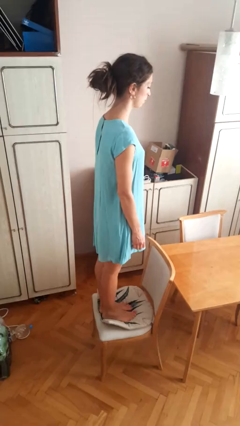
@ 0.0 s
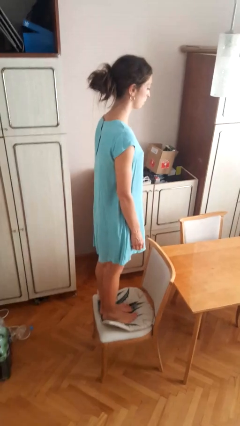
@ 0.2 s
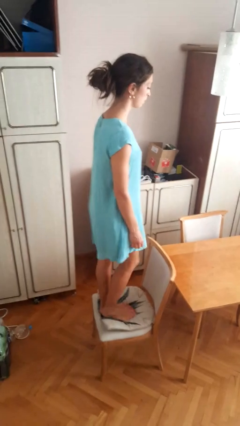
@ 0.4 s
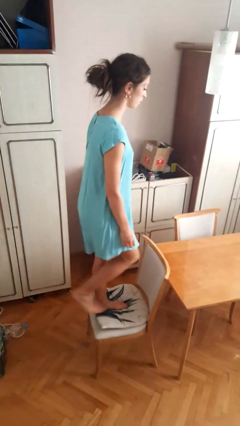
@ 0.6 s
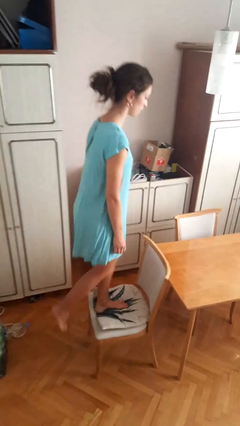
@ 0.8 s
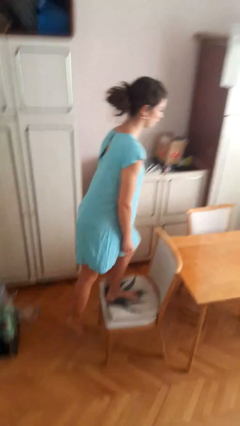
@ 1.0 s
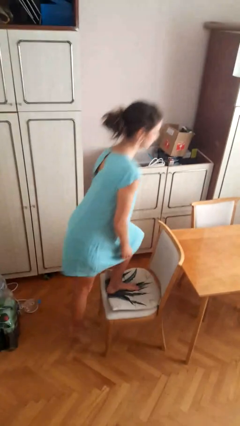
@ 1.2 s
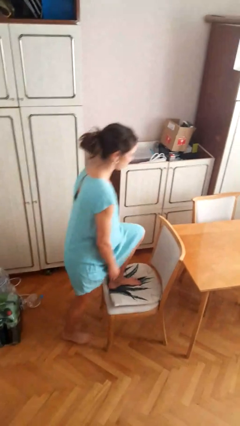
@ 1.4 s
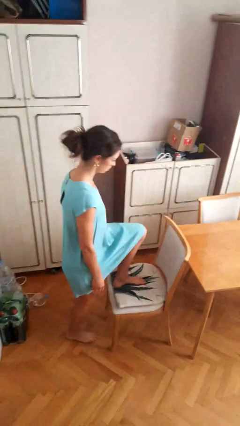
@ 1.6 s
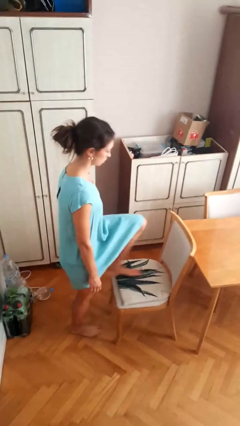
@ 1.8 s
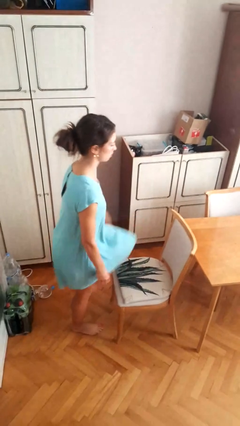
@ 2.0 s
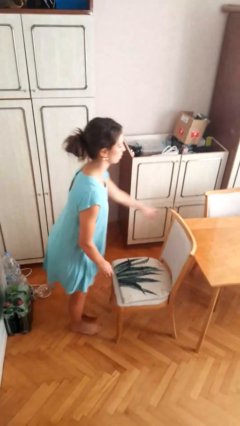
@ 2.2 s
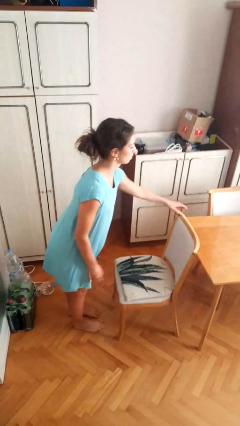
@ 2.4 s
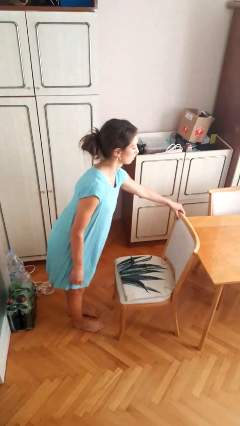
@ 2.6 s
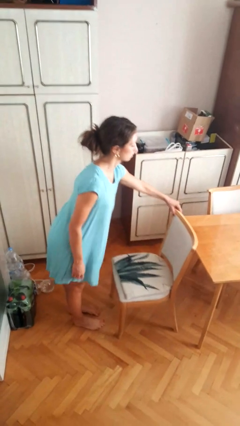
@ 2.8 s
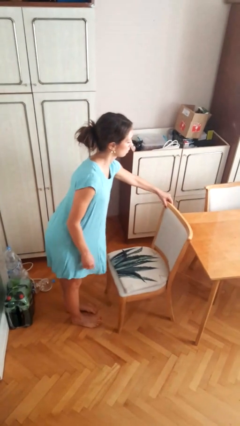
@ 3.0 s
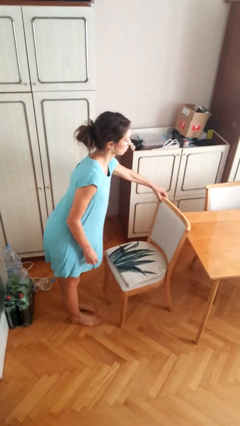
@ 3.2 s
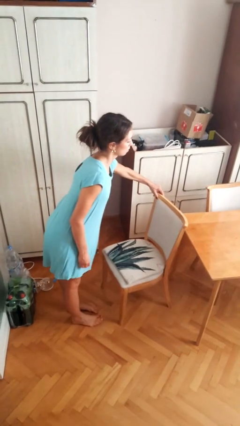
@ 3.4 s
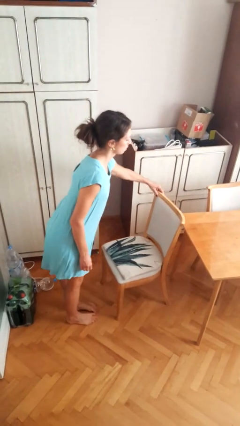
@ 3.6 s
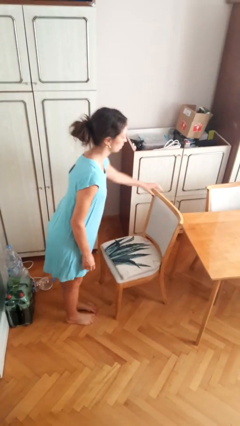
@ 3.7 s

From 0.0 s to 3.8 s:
person climbs off chair

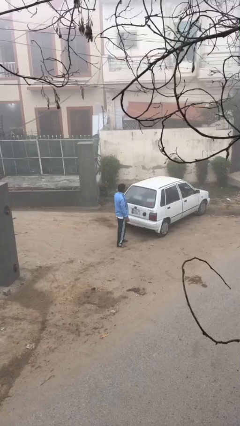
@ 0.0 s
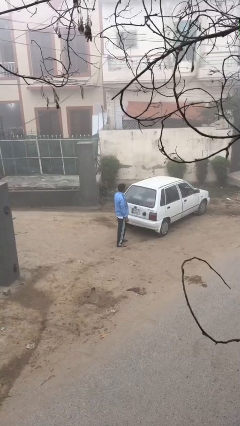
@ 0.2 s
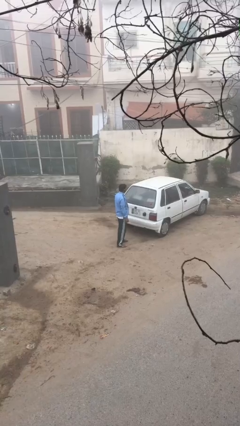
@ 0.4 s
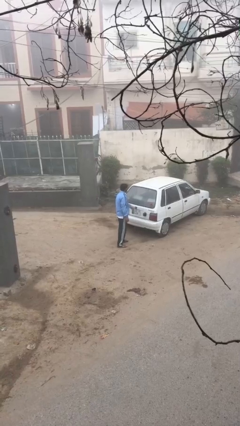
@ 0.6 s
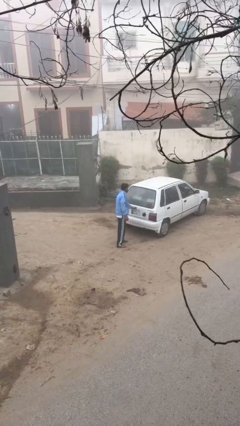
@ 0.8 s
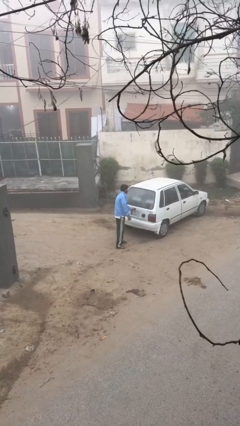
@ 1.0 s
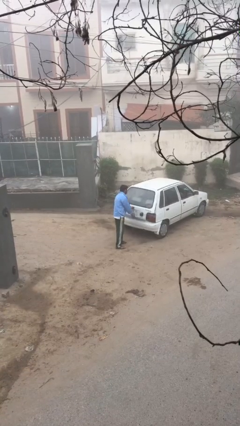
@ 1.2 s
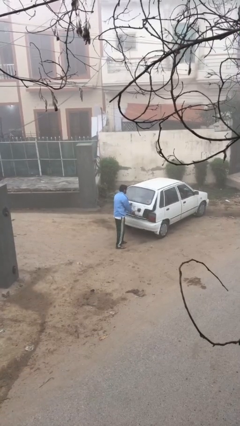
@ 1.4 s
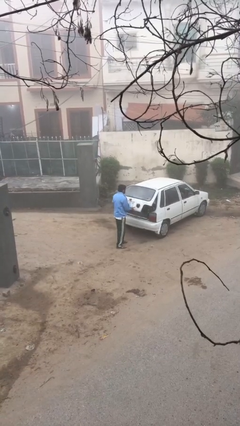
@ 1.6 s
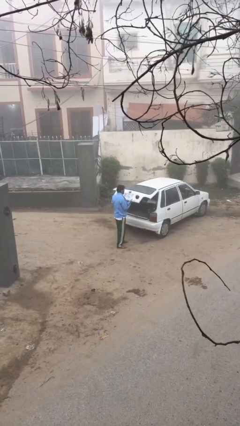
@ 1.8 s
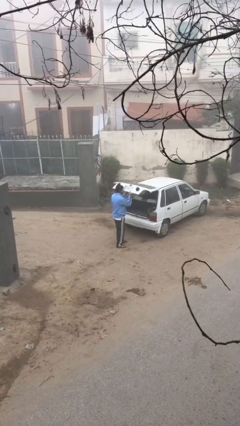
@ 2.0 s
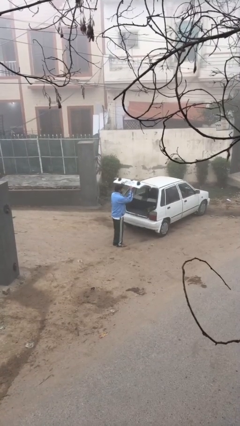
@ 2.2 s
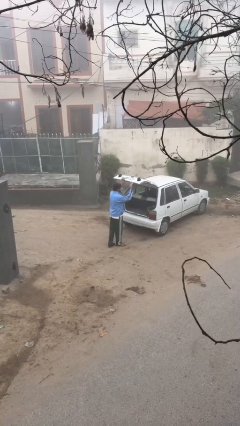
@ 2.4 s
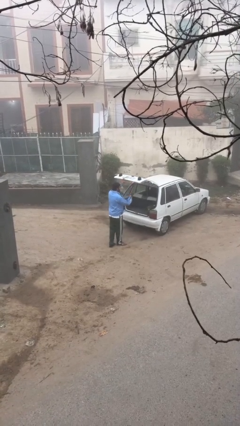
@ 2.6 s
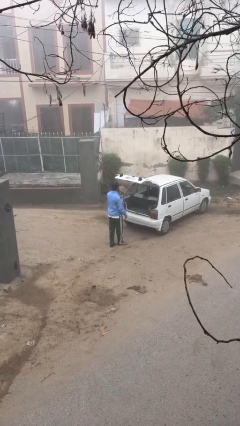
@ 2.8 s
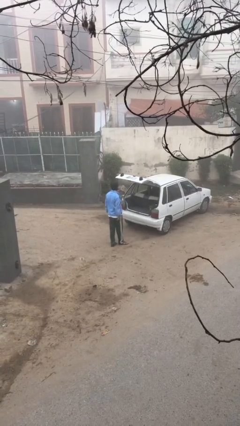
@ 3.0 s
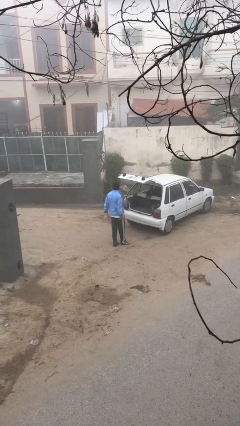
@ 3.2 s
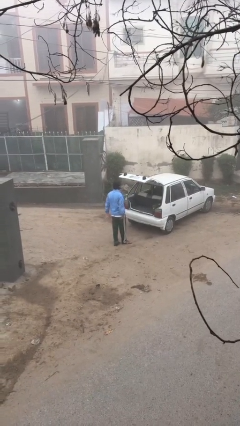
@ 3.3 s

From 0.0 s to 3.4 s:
person opens car trunk

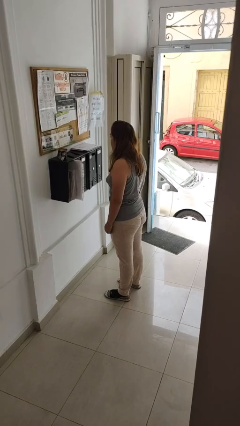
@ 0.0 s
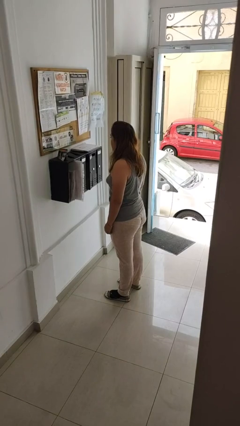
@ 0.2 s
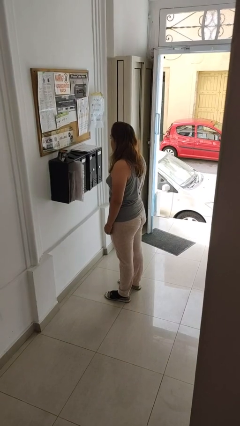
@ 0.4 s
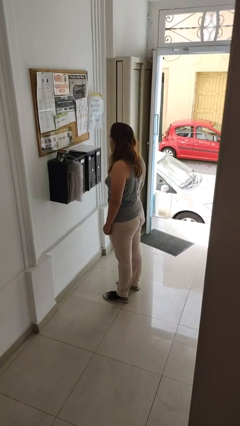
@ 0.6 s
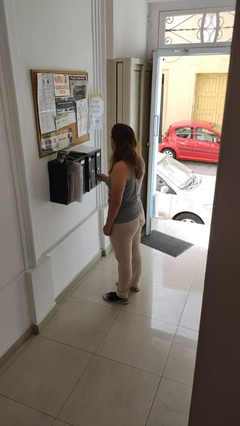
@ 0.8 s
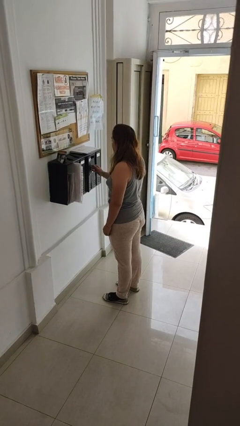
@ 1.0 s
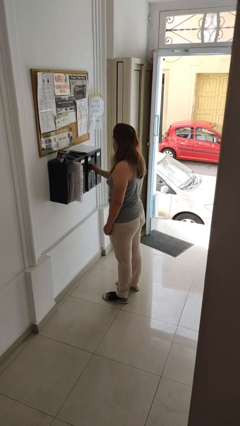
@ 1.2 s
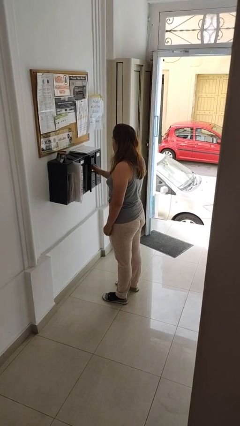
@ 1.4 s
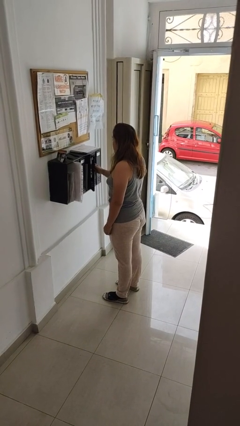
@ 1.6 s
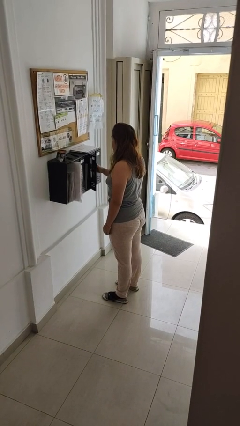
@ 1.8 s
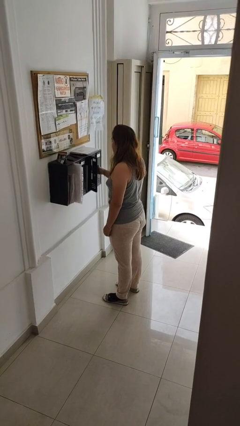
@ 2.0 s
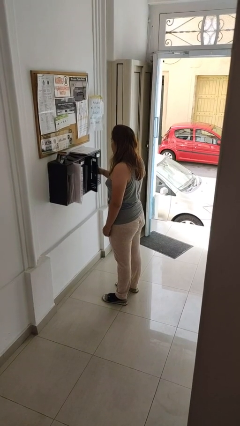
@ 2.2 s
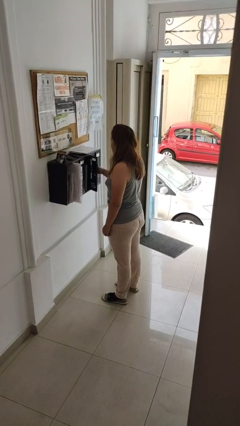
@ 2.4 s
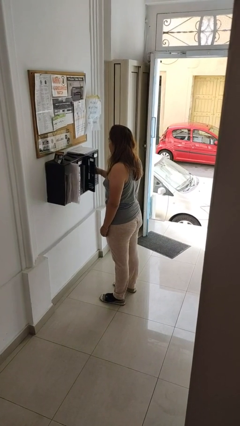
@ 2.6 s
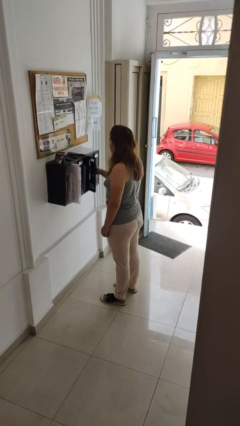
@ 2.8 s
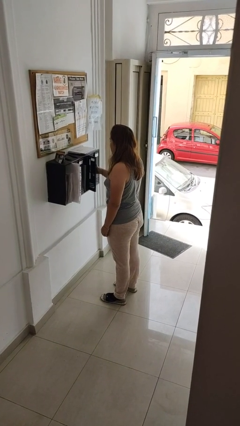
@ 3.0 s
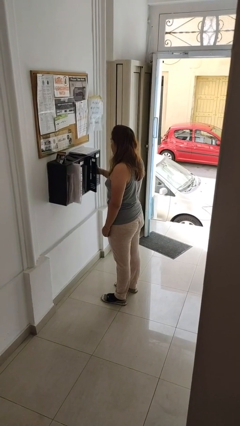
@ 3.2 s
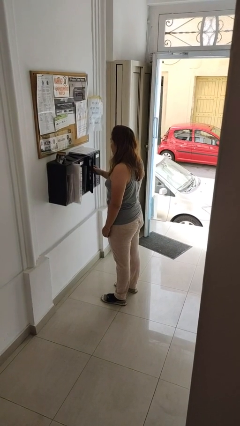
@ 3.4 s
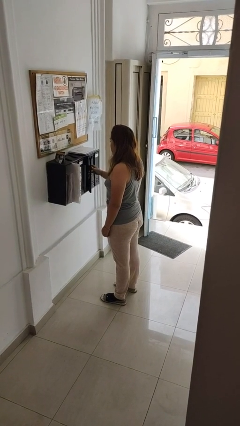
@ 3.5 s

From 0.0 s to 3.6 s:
person opens mailbox

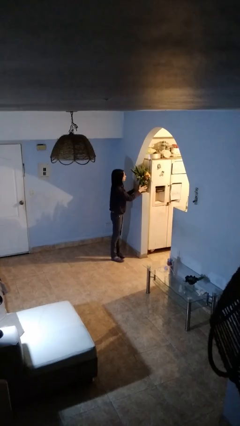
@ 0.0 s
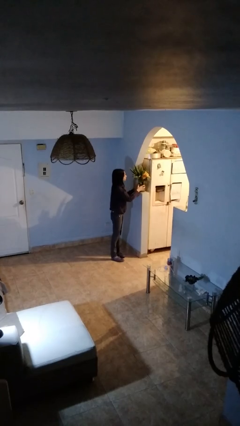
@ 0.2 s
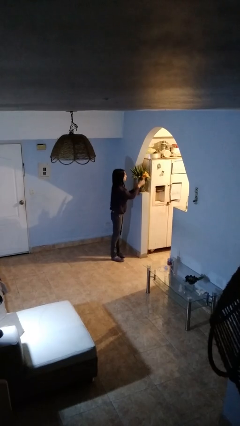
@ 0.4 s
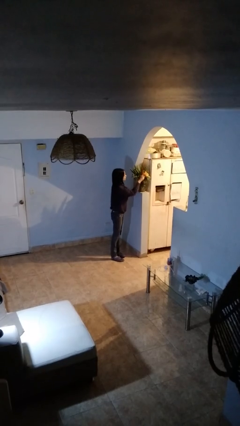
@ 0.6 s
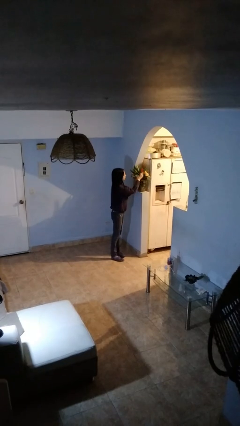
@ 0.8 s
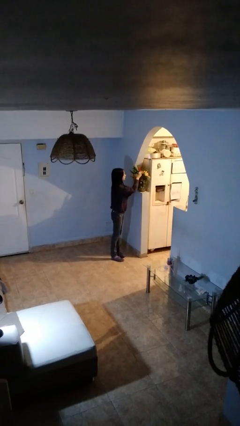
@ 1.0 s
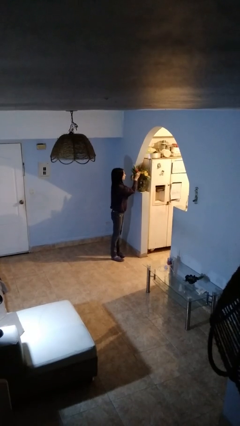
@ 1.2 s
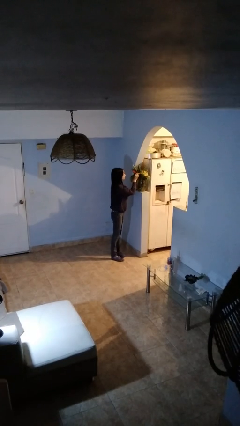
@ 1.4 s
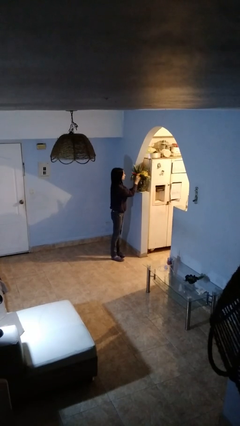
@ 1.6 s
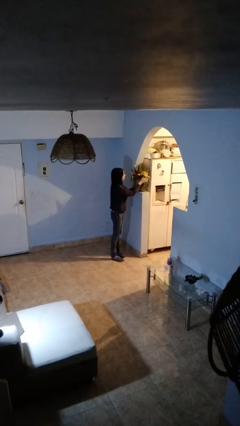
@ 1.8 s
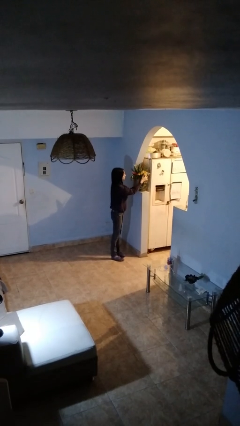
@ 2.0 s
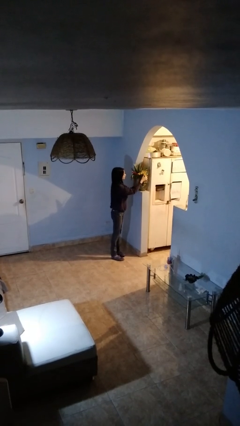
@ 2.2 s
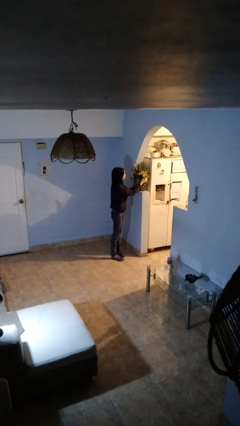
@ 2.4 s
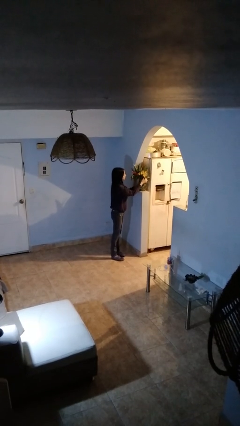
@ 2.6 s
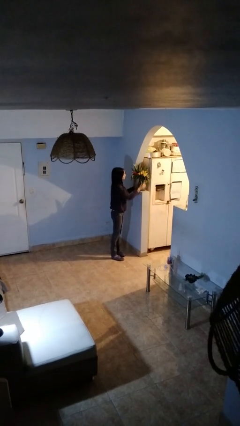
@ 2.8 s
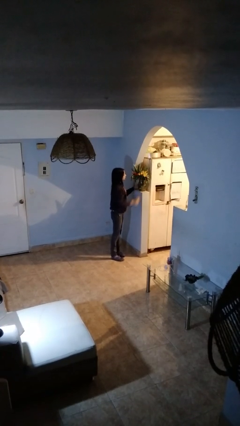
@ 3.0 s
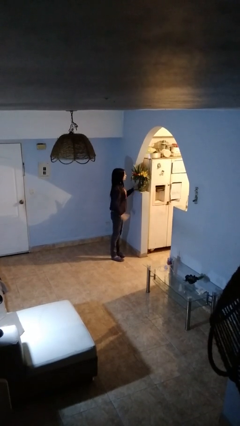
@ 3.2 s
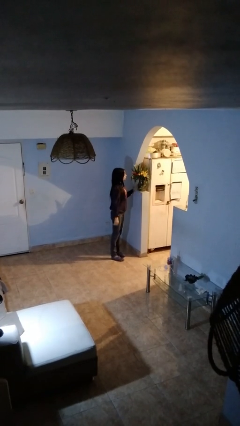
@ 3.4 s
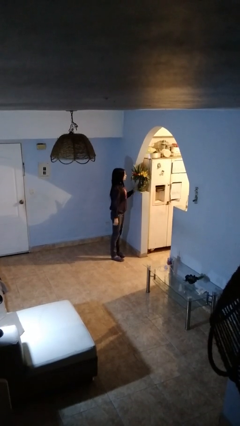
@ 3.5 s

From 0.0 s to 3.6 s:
person arranges flowers in vase

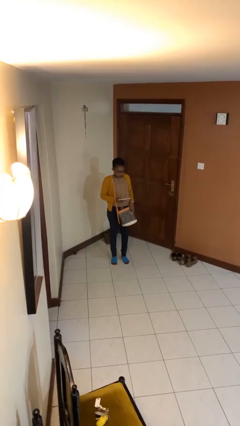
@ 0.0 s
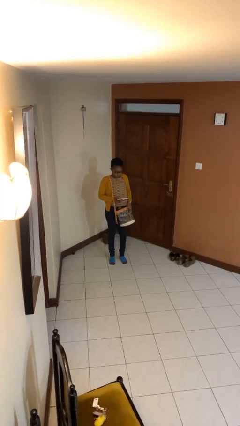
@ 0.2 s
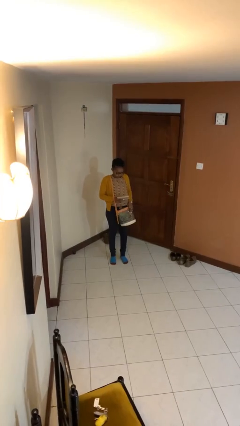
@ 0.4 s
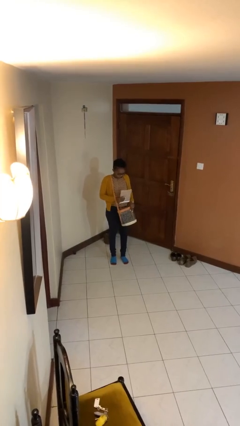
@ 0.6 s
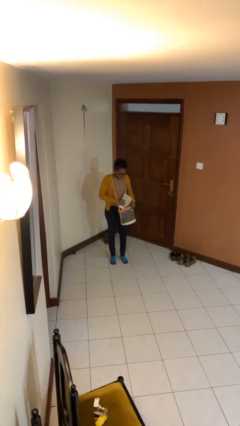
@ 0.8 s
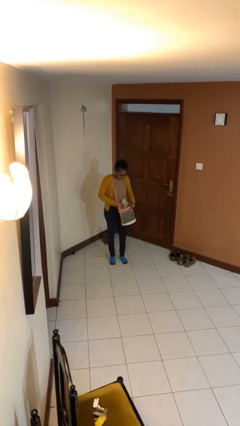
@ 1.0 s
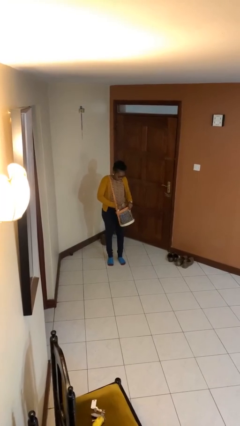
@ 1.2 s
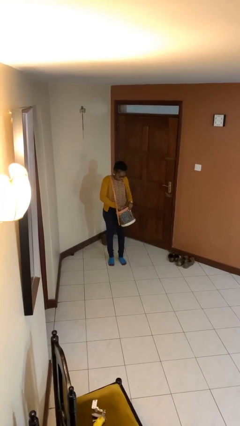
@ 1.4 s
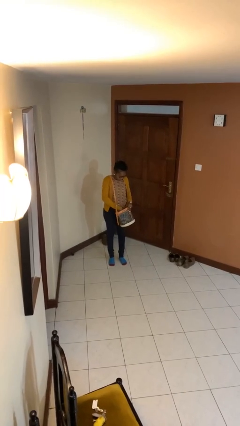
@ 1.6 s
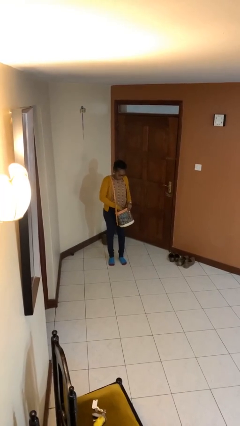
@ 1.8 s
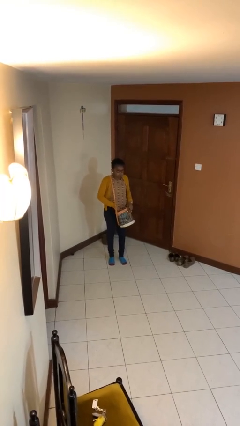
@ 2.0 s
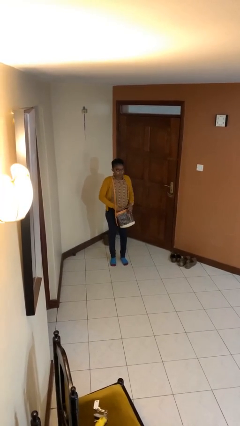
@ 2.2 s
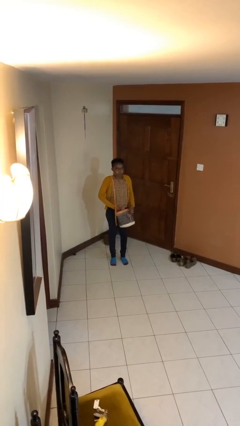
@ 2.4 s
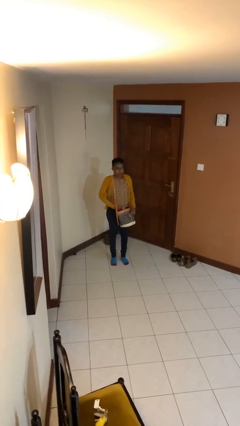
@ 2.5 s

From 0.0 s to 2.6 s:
person puts object into purse

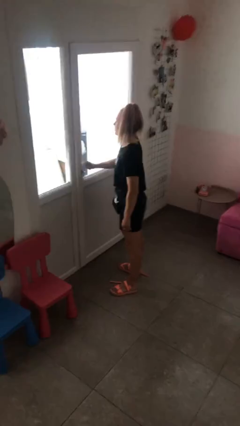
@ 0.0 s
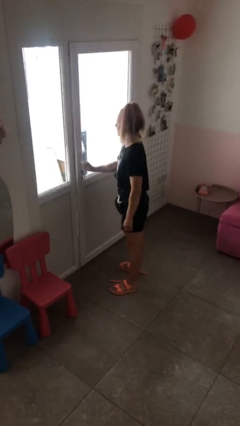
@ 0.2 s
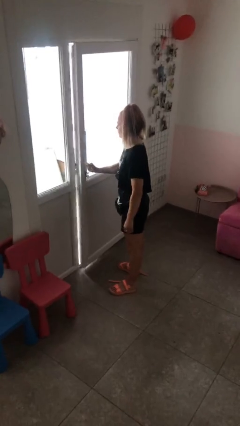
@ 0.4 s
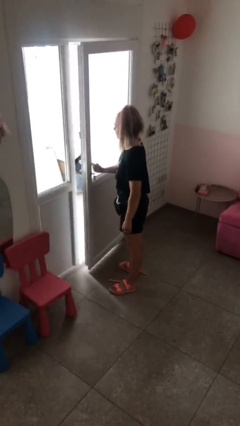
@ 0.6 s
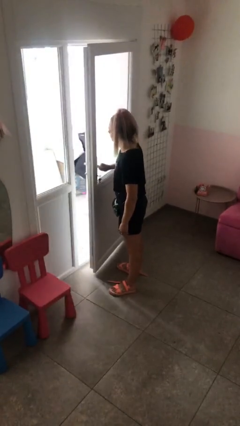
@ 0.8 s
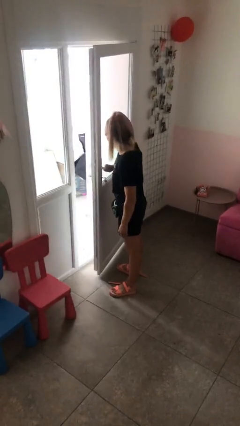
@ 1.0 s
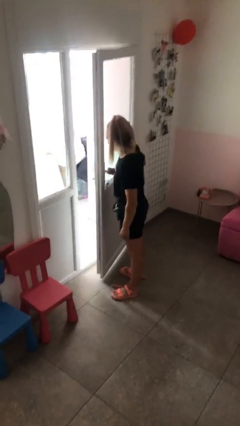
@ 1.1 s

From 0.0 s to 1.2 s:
person opens facility door
